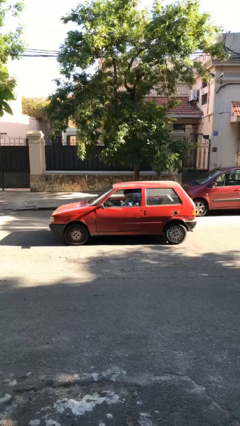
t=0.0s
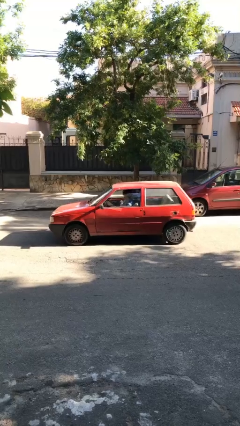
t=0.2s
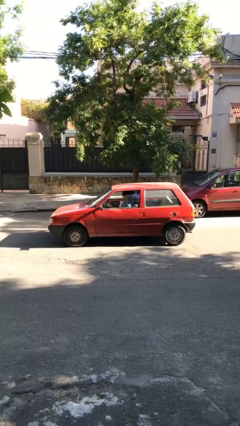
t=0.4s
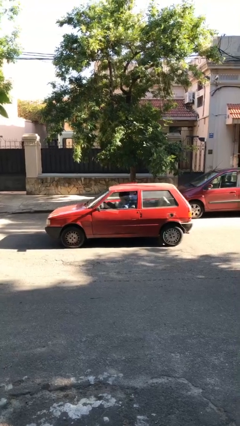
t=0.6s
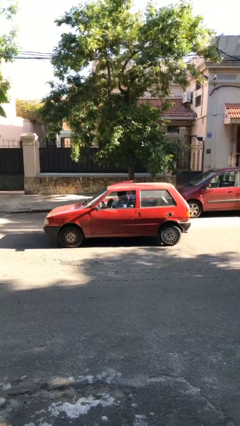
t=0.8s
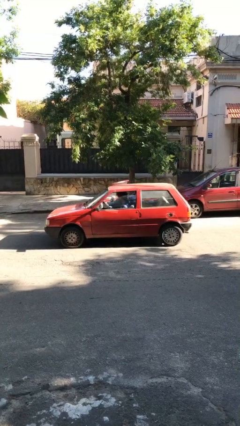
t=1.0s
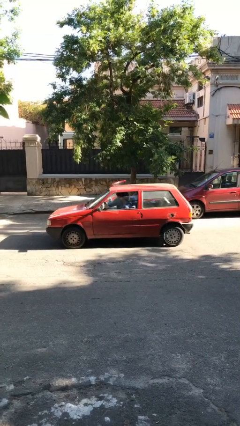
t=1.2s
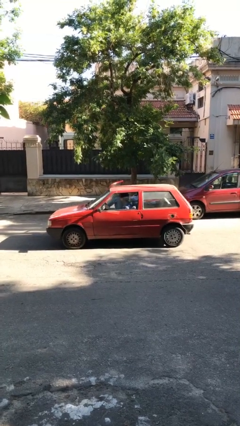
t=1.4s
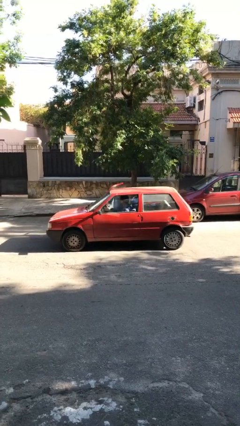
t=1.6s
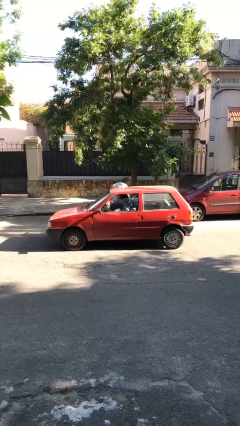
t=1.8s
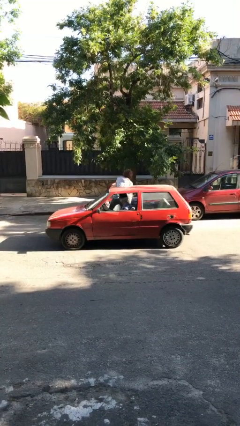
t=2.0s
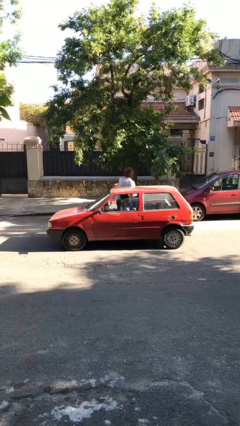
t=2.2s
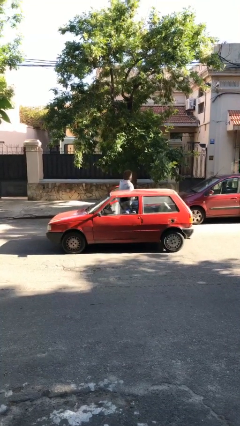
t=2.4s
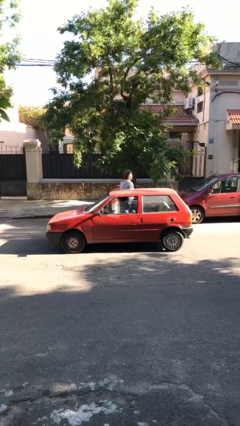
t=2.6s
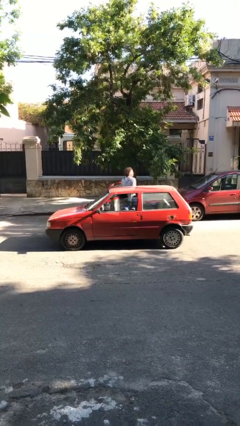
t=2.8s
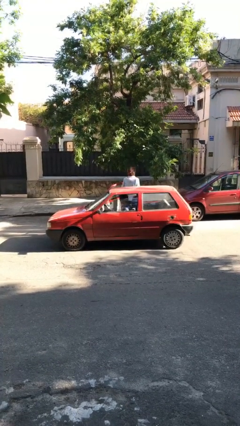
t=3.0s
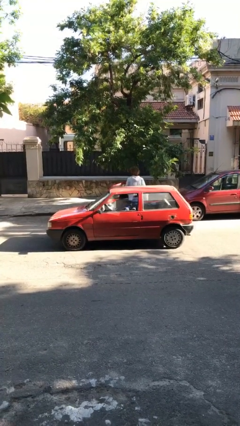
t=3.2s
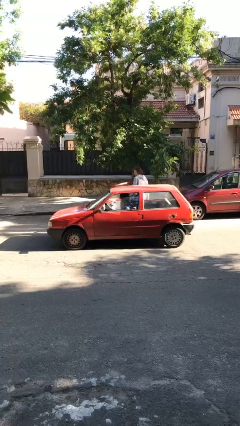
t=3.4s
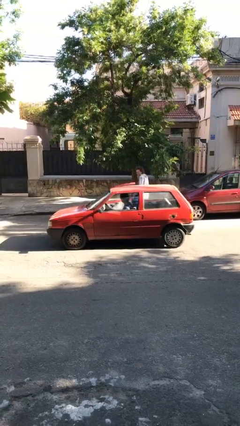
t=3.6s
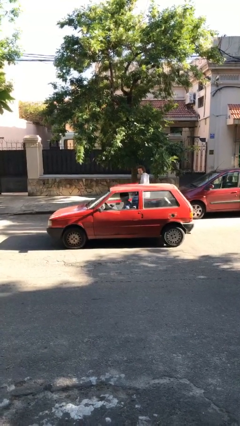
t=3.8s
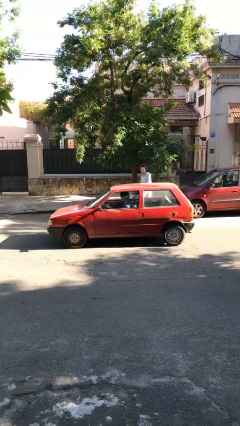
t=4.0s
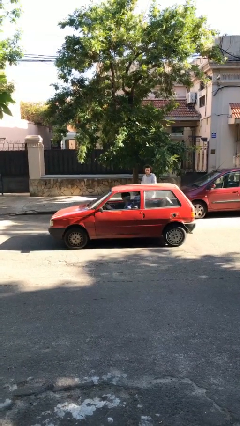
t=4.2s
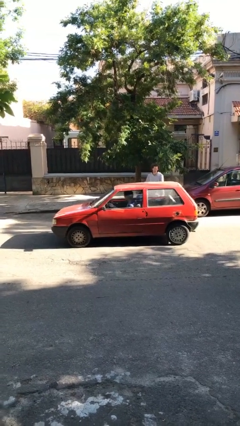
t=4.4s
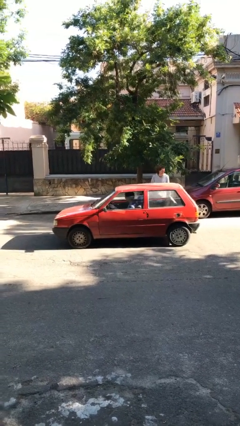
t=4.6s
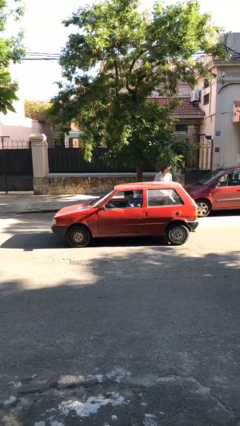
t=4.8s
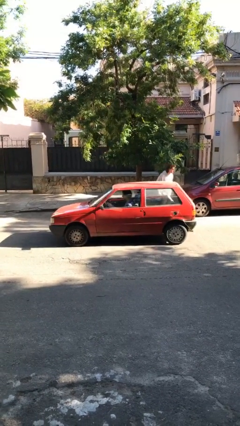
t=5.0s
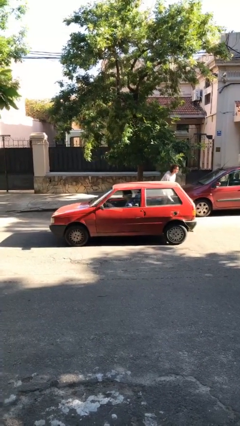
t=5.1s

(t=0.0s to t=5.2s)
car drops off person

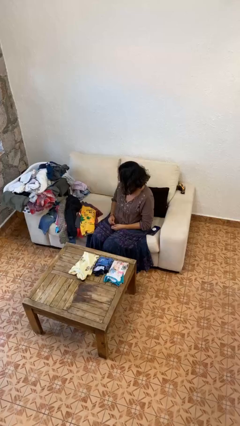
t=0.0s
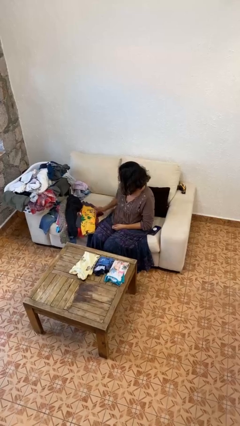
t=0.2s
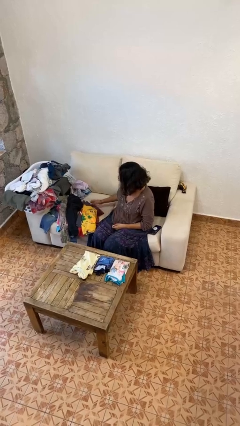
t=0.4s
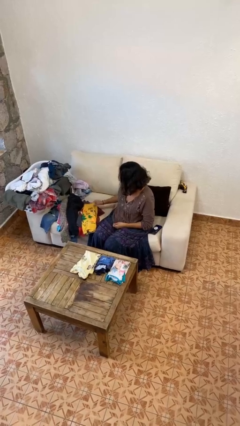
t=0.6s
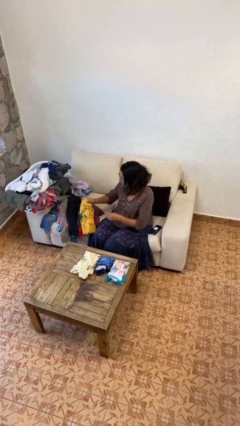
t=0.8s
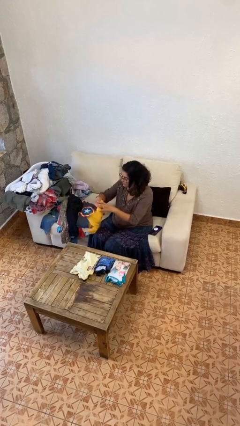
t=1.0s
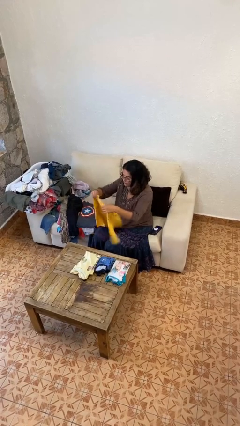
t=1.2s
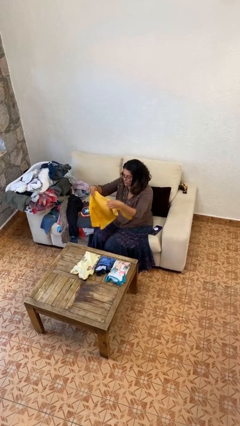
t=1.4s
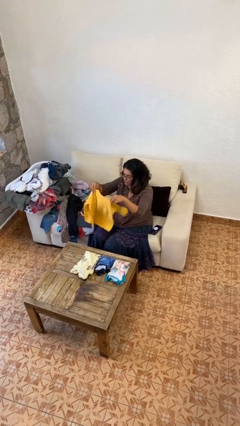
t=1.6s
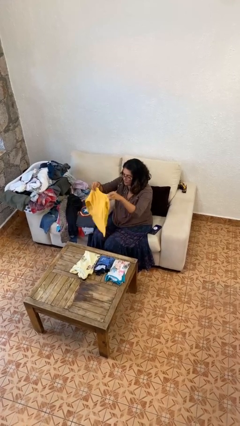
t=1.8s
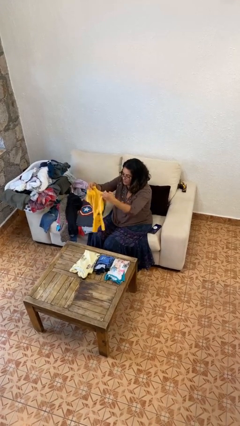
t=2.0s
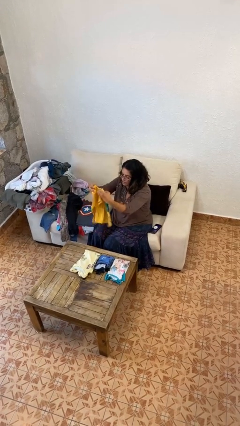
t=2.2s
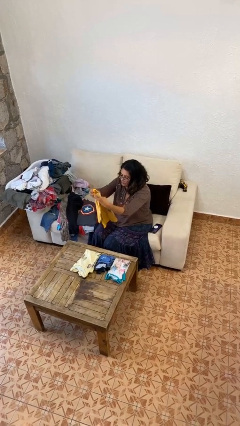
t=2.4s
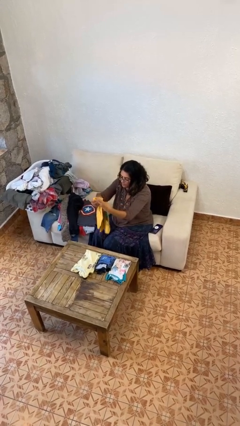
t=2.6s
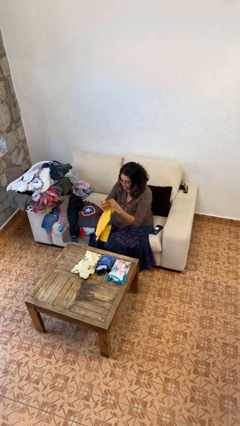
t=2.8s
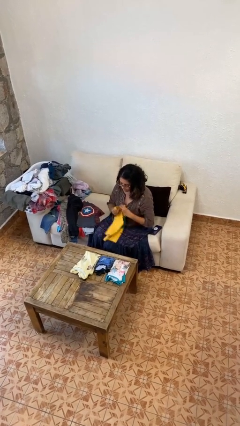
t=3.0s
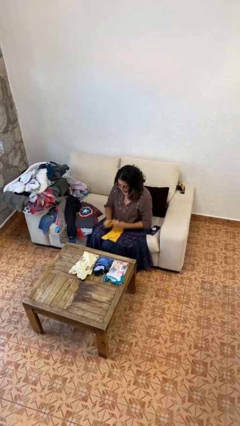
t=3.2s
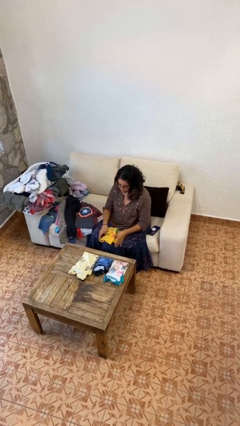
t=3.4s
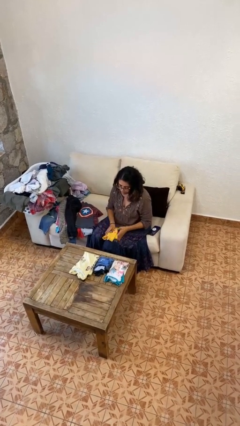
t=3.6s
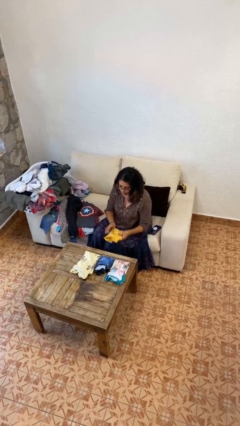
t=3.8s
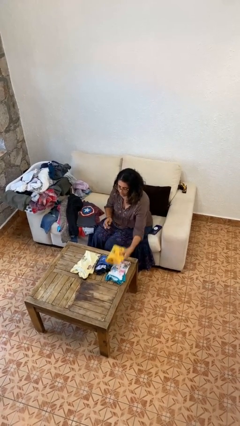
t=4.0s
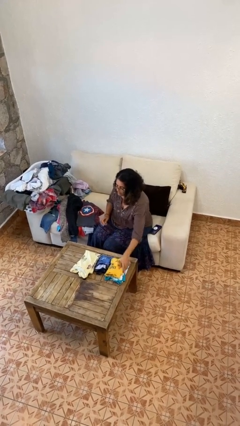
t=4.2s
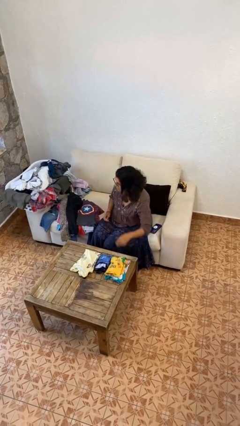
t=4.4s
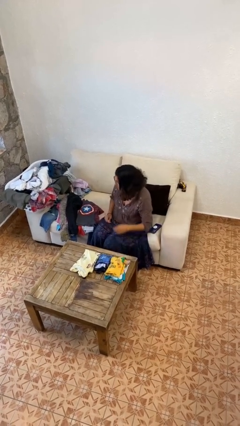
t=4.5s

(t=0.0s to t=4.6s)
person folds shirt

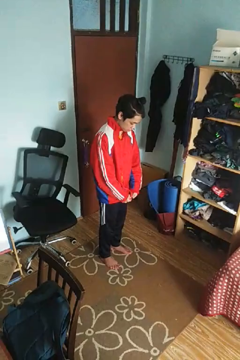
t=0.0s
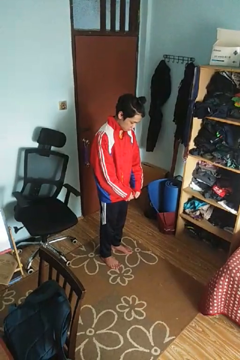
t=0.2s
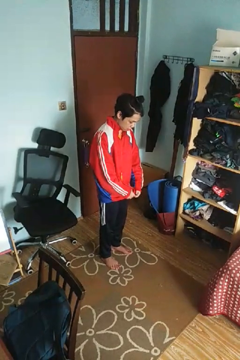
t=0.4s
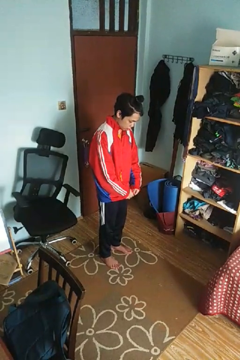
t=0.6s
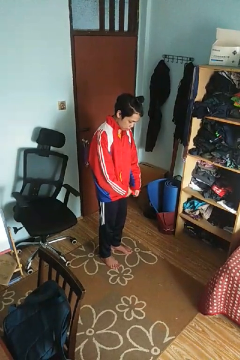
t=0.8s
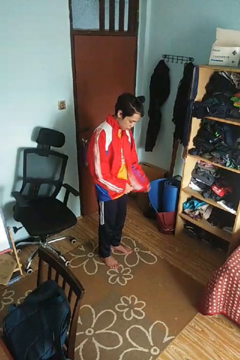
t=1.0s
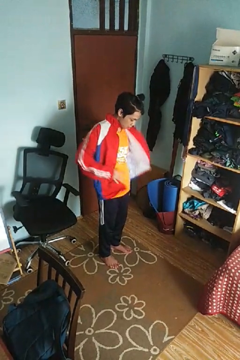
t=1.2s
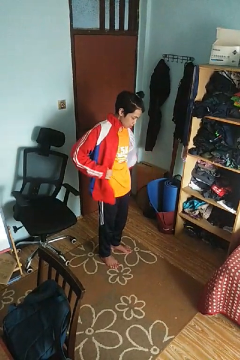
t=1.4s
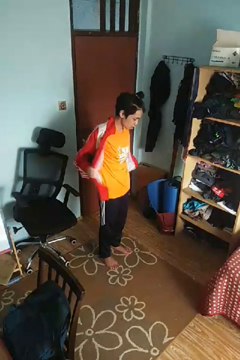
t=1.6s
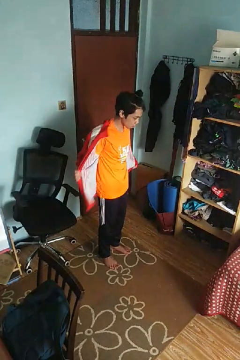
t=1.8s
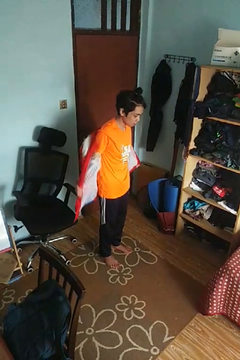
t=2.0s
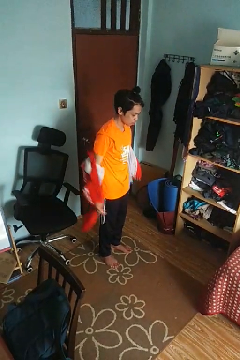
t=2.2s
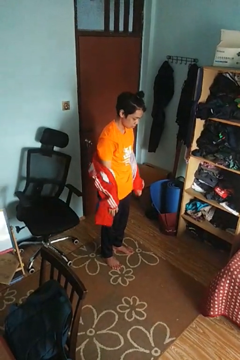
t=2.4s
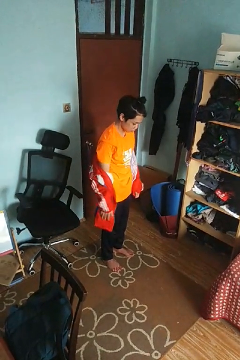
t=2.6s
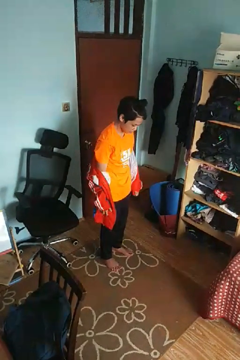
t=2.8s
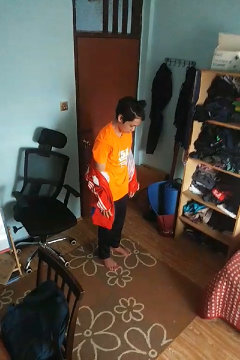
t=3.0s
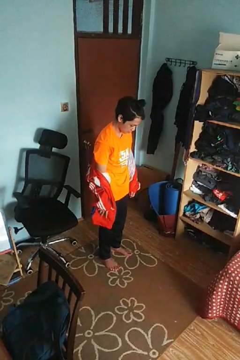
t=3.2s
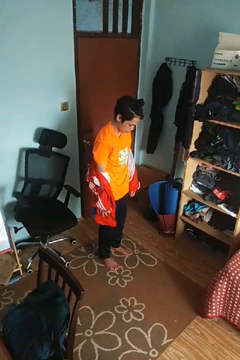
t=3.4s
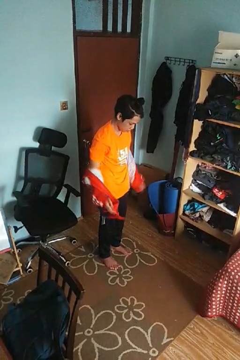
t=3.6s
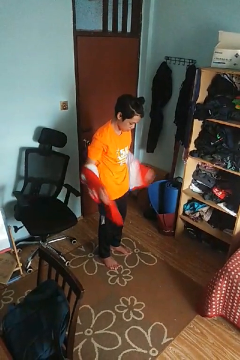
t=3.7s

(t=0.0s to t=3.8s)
person takes off jacket

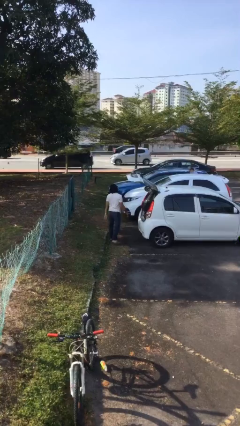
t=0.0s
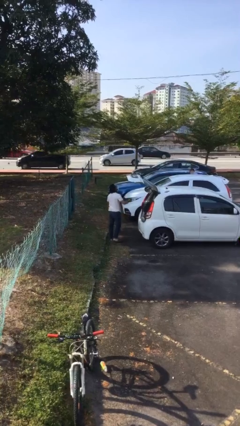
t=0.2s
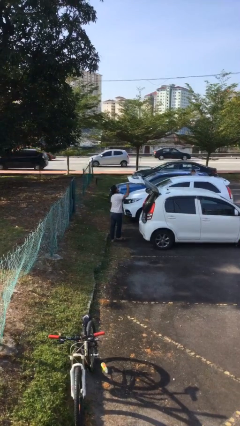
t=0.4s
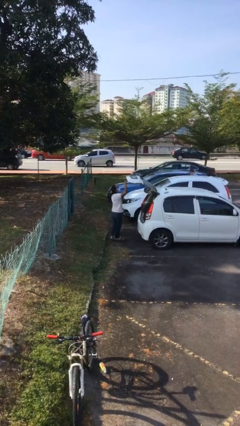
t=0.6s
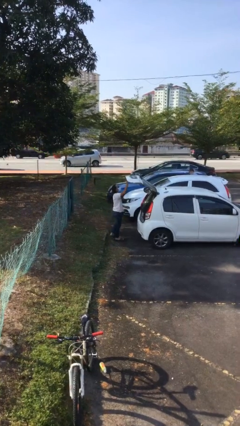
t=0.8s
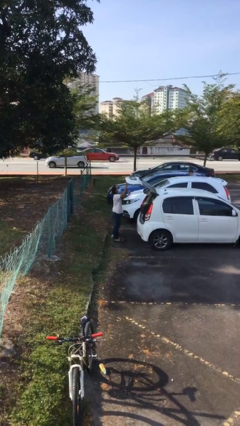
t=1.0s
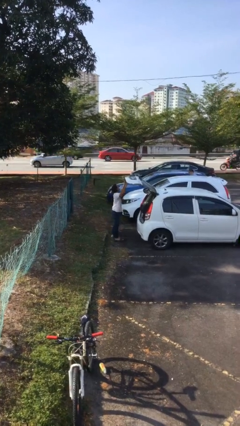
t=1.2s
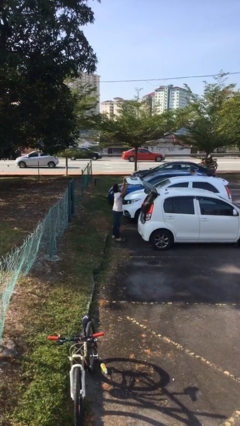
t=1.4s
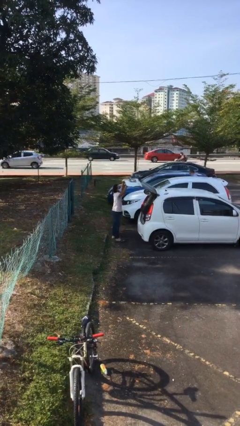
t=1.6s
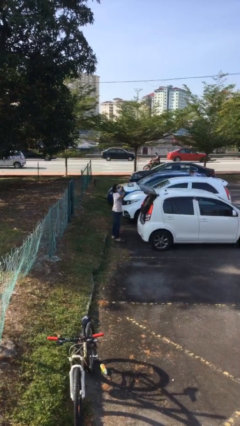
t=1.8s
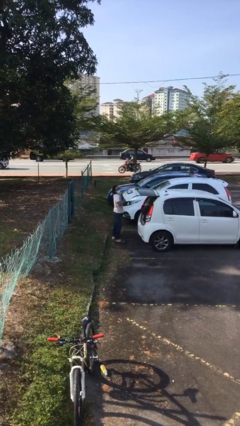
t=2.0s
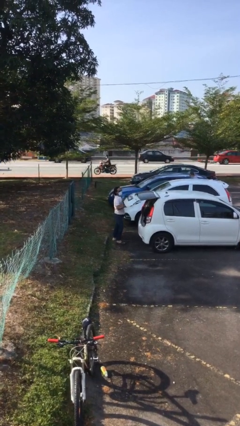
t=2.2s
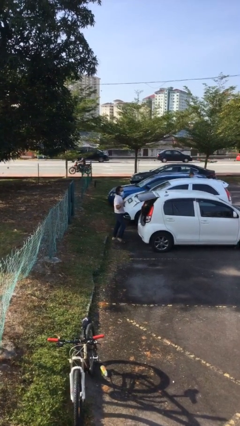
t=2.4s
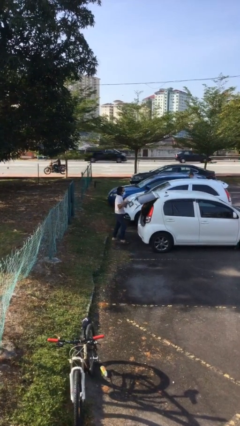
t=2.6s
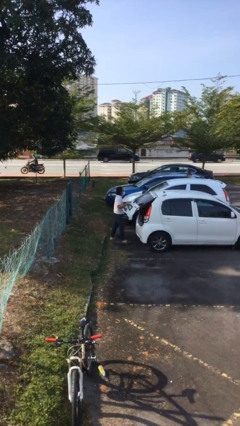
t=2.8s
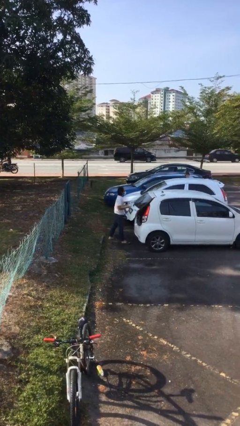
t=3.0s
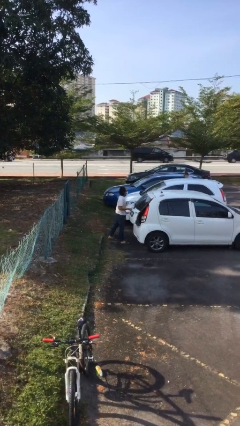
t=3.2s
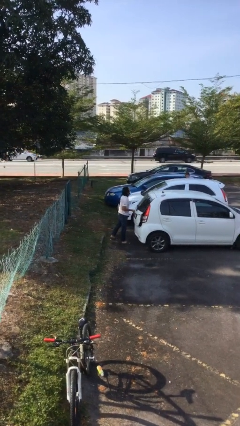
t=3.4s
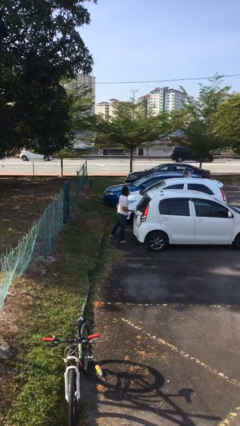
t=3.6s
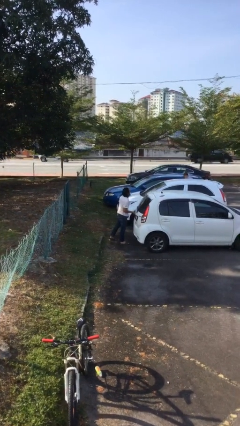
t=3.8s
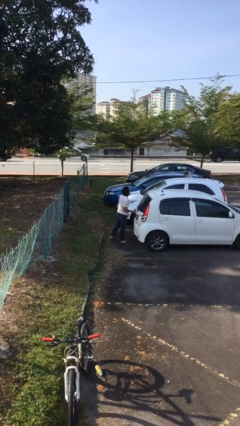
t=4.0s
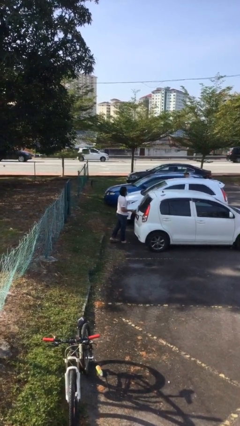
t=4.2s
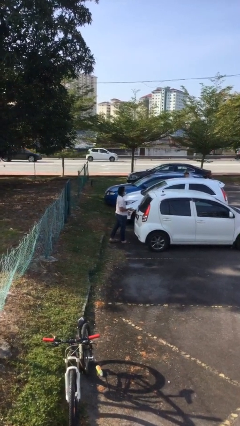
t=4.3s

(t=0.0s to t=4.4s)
person closes car trunk

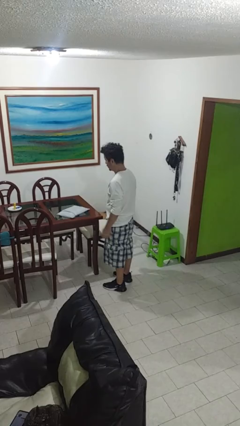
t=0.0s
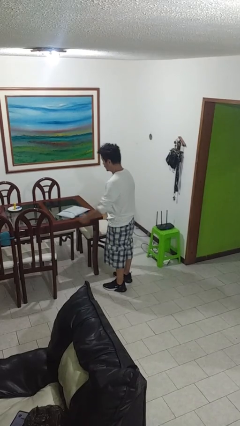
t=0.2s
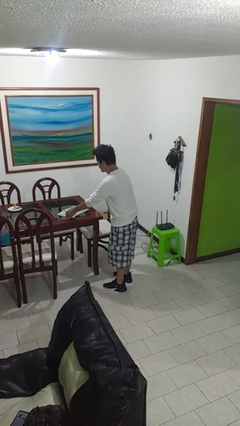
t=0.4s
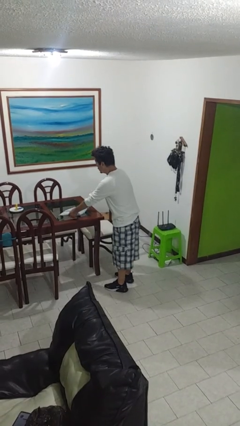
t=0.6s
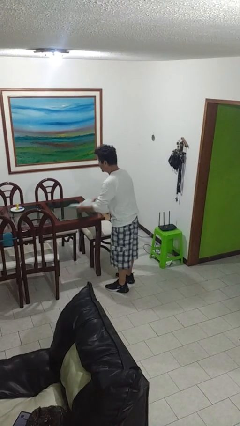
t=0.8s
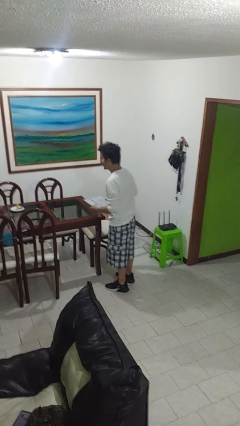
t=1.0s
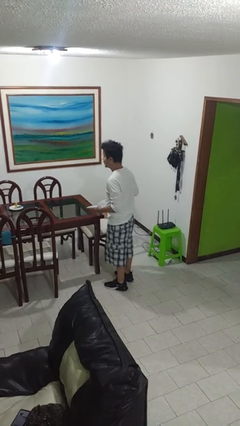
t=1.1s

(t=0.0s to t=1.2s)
person picks up object from table
